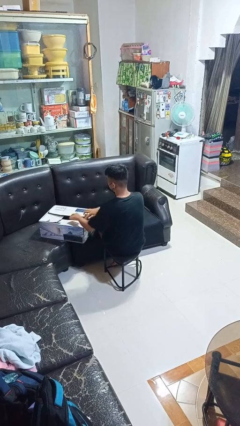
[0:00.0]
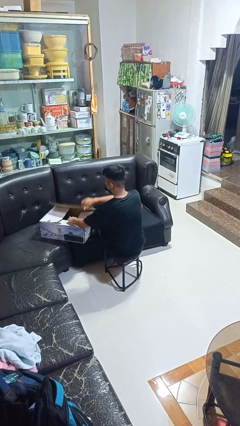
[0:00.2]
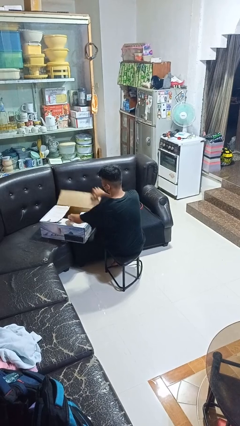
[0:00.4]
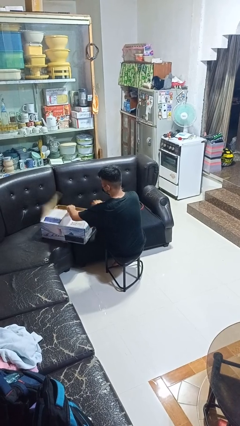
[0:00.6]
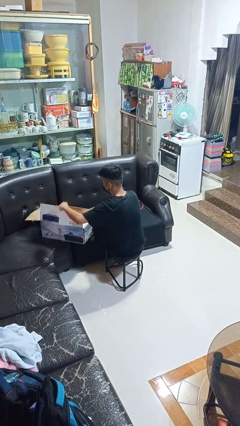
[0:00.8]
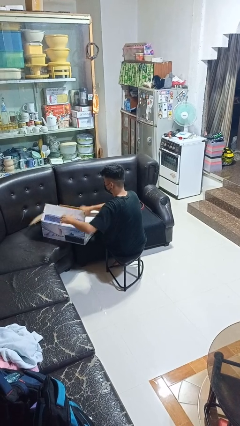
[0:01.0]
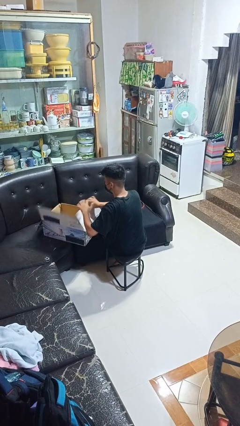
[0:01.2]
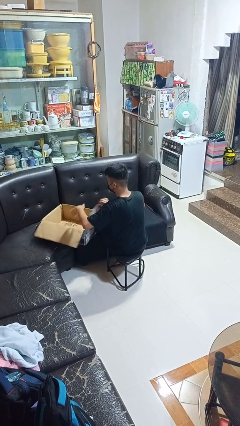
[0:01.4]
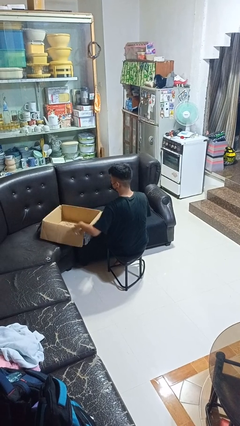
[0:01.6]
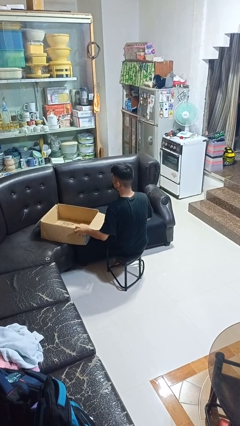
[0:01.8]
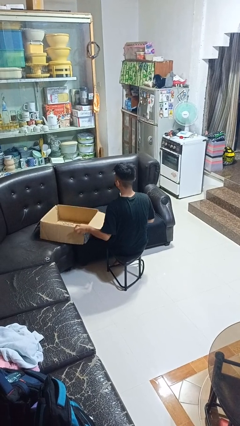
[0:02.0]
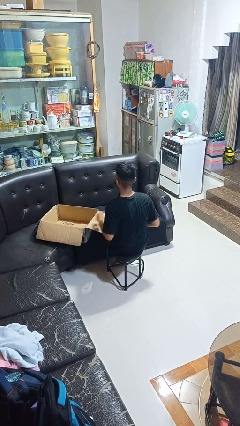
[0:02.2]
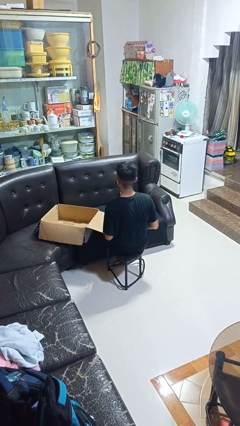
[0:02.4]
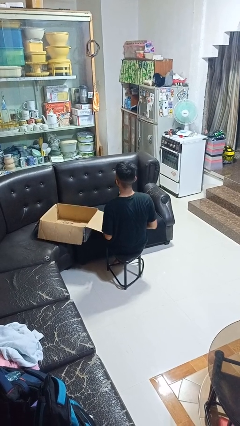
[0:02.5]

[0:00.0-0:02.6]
person opens box

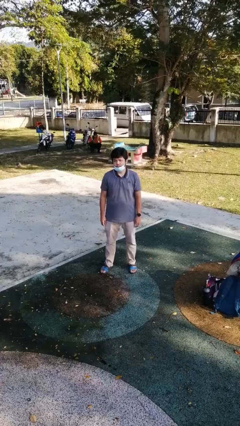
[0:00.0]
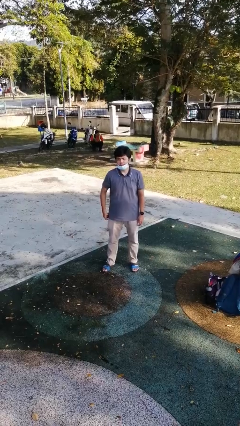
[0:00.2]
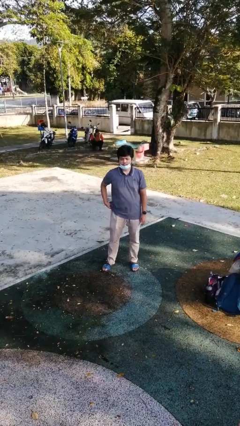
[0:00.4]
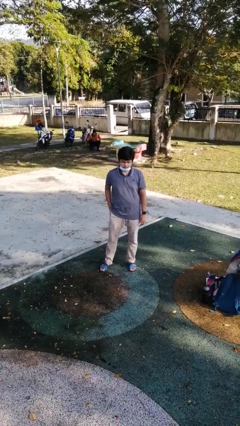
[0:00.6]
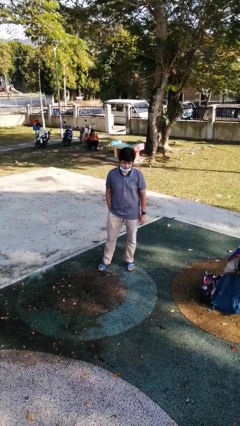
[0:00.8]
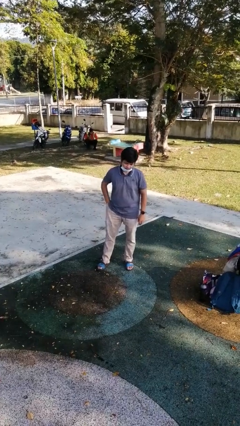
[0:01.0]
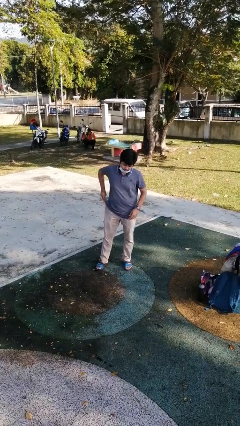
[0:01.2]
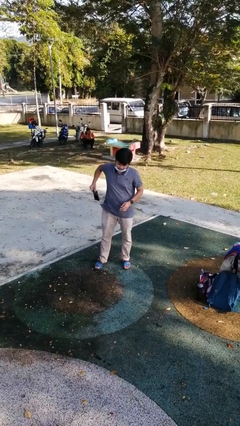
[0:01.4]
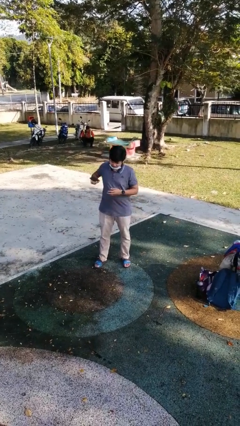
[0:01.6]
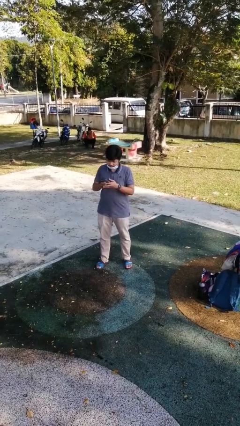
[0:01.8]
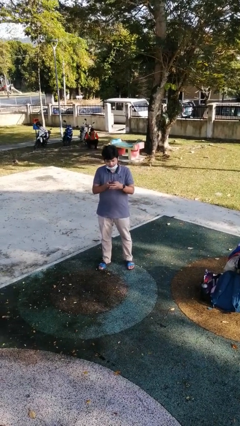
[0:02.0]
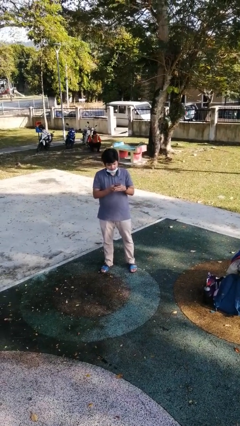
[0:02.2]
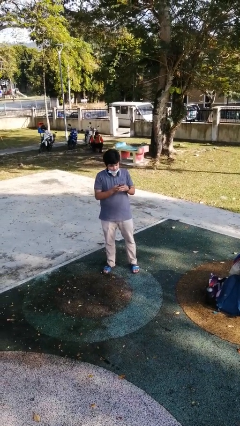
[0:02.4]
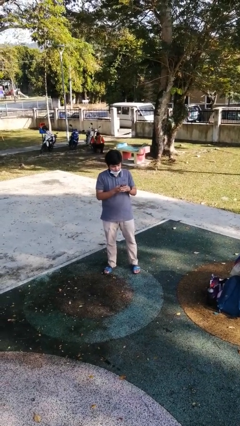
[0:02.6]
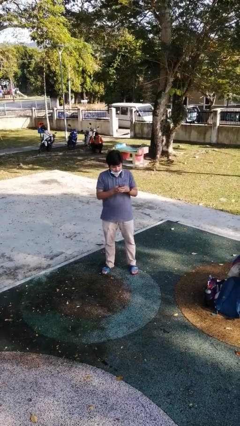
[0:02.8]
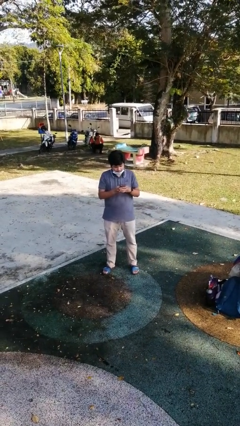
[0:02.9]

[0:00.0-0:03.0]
person takes phone from pocket

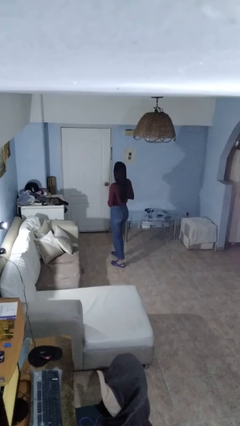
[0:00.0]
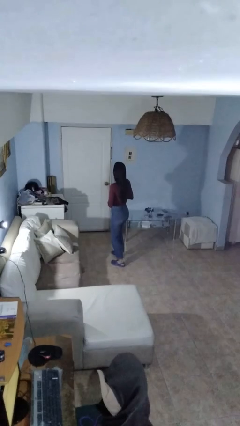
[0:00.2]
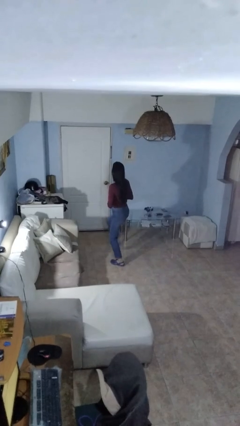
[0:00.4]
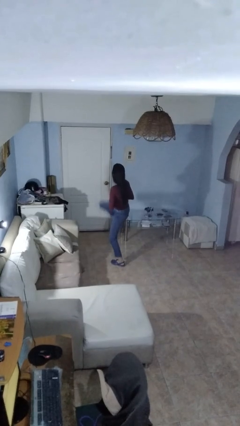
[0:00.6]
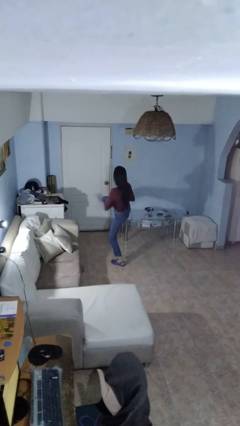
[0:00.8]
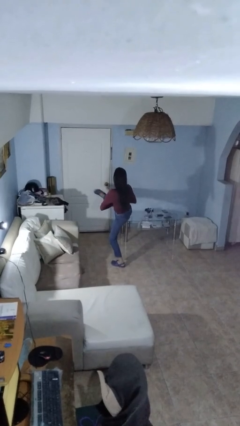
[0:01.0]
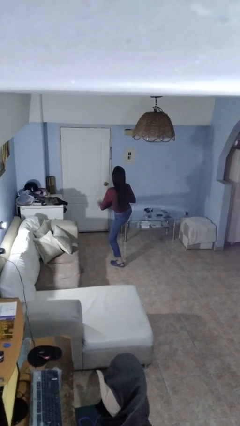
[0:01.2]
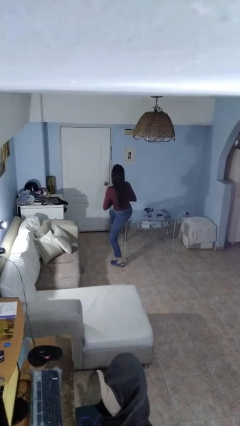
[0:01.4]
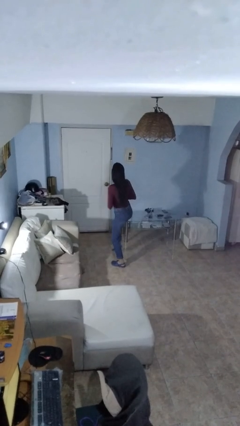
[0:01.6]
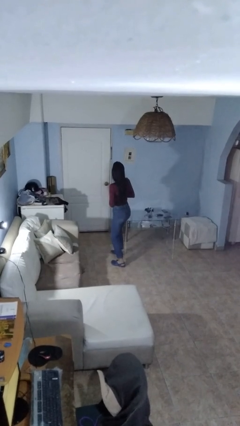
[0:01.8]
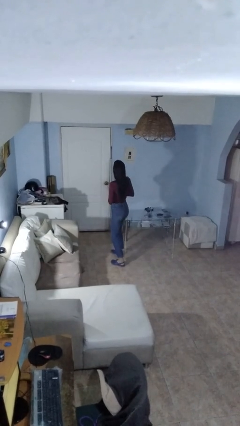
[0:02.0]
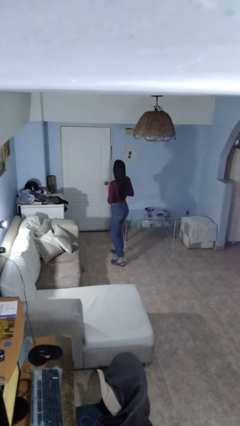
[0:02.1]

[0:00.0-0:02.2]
person karate kicks

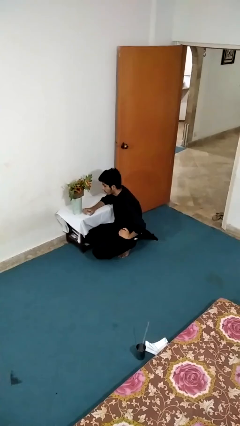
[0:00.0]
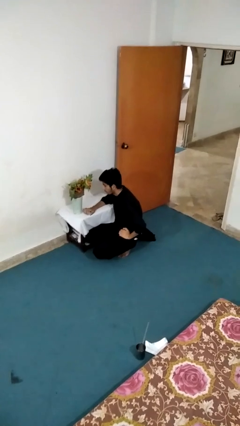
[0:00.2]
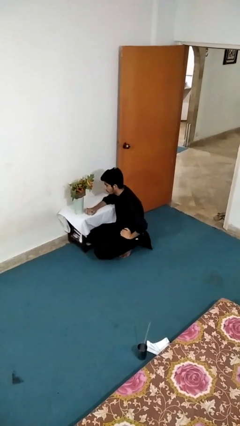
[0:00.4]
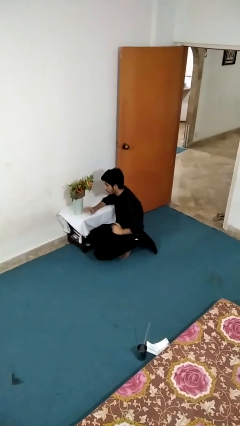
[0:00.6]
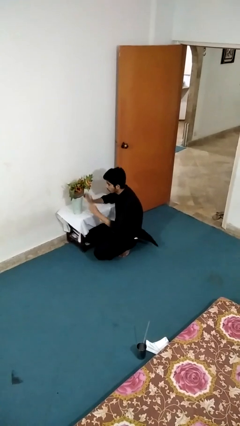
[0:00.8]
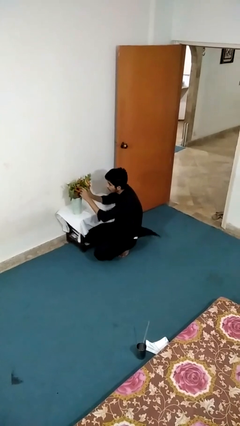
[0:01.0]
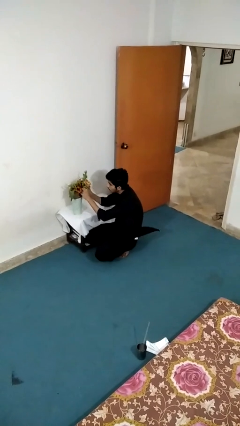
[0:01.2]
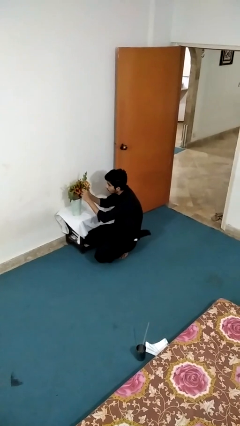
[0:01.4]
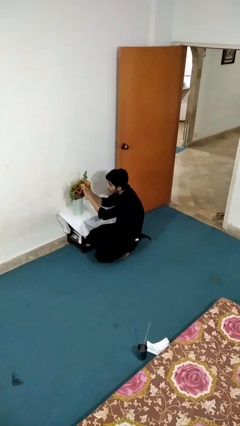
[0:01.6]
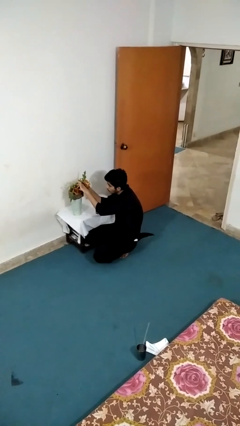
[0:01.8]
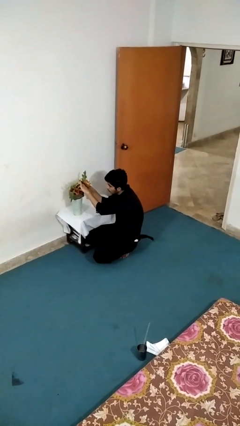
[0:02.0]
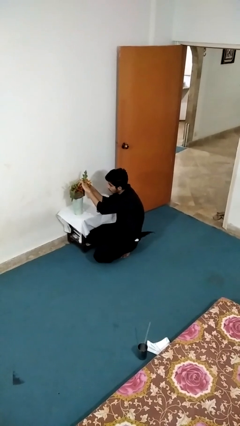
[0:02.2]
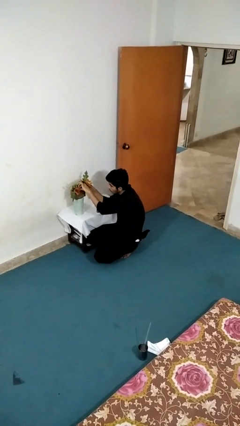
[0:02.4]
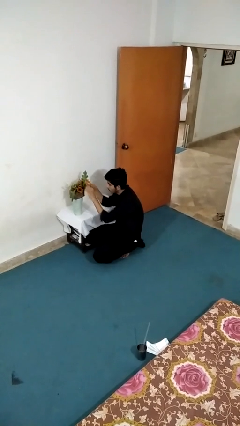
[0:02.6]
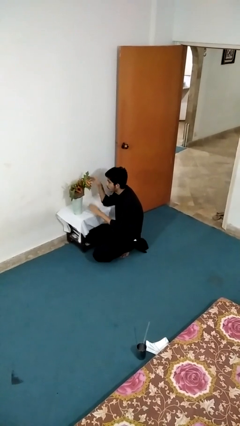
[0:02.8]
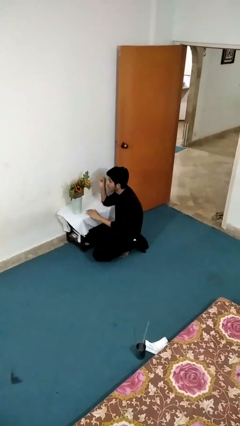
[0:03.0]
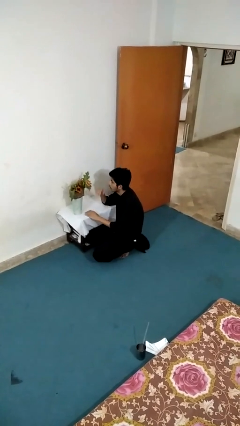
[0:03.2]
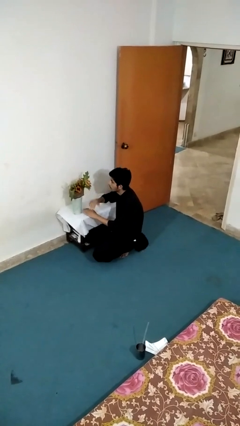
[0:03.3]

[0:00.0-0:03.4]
person arranges flowers in vase

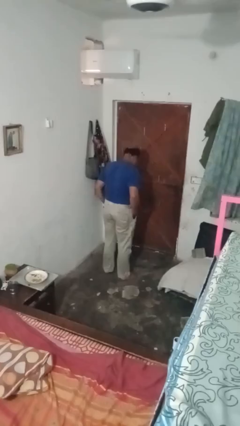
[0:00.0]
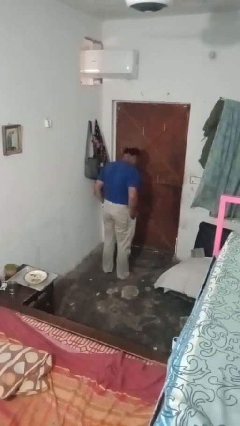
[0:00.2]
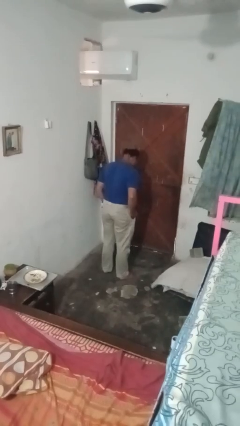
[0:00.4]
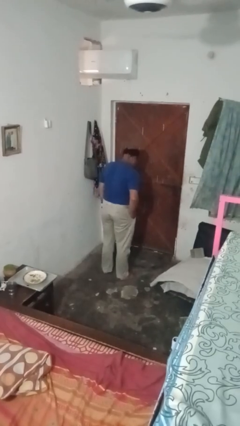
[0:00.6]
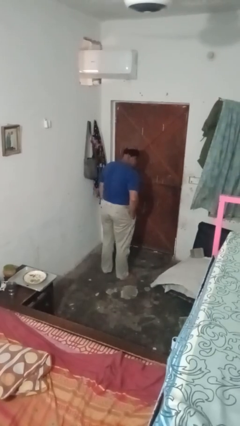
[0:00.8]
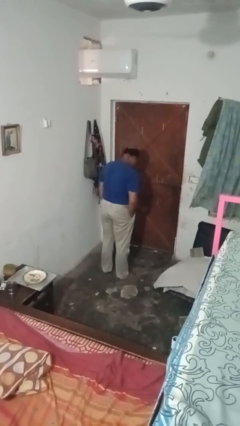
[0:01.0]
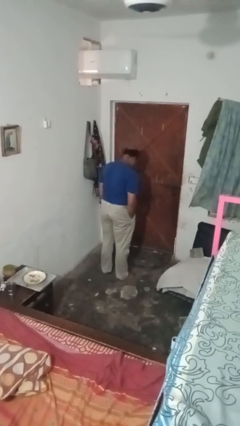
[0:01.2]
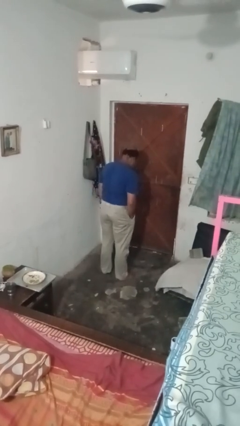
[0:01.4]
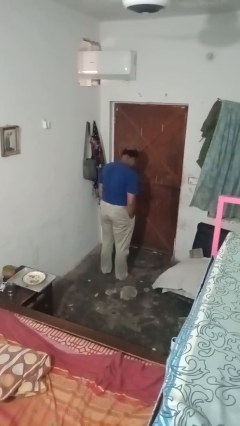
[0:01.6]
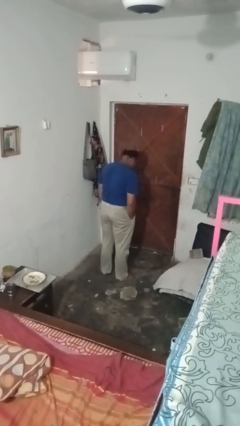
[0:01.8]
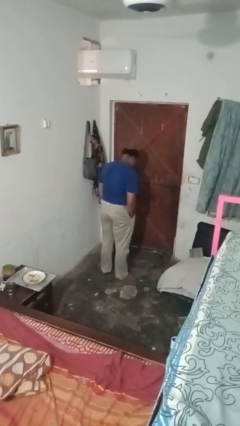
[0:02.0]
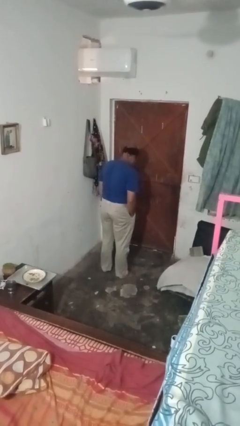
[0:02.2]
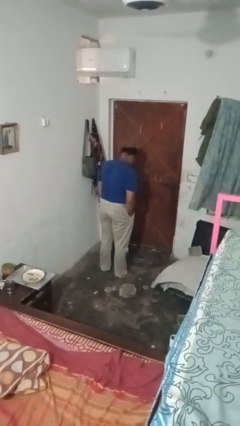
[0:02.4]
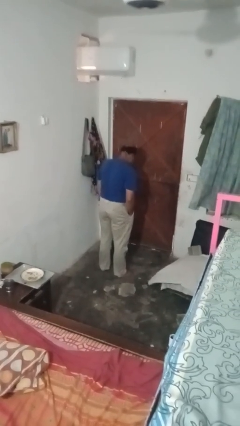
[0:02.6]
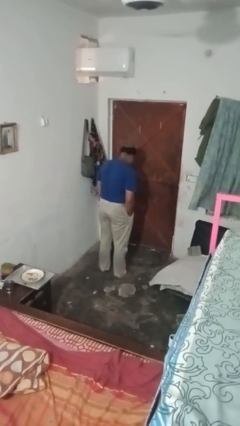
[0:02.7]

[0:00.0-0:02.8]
person puts hands in back pockets

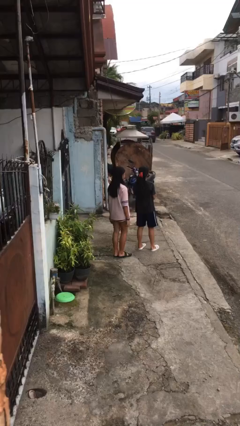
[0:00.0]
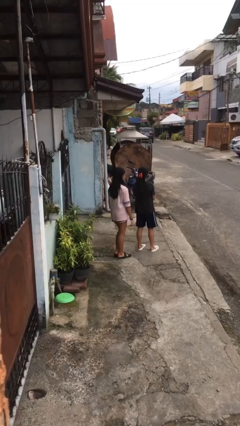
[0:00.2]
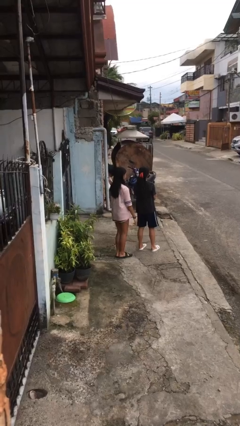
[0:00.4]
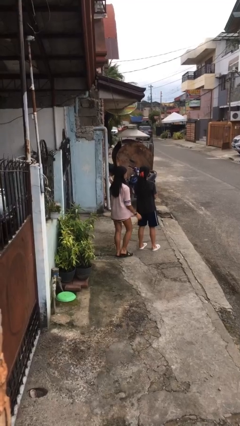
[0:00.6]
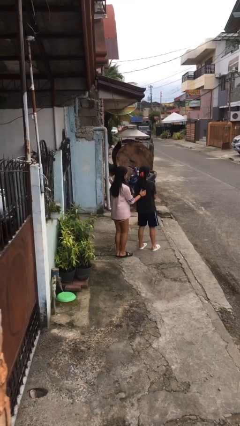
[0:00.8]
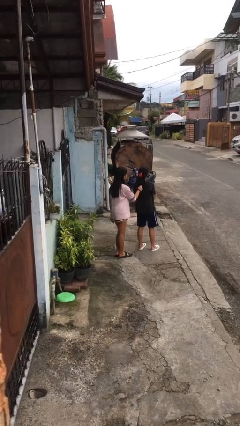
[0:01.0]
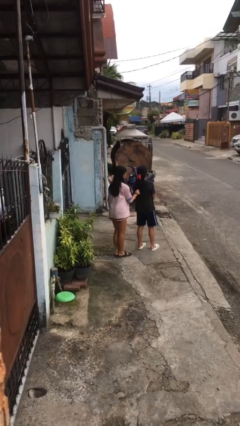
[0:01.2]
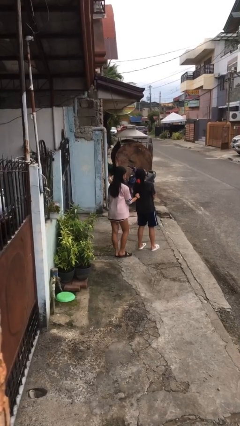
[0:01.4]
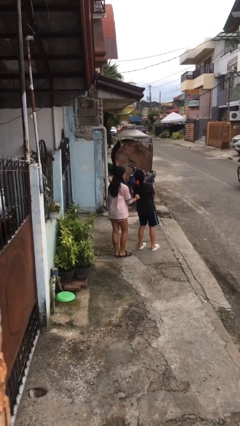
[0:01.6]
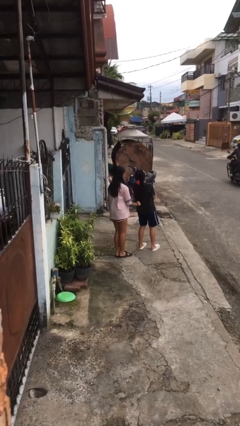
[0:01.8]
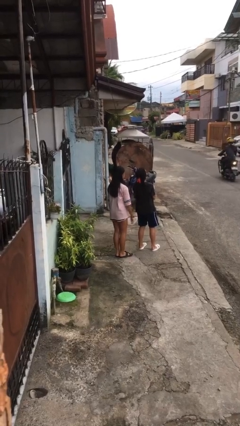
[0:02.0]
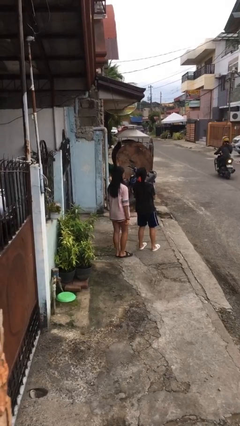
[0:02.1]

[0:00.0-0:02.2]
person grabs person by hair

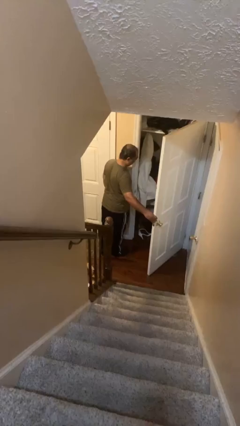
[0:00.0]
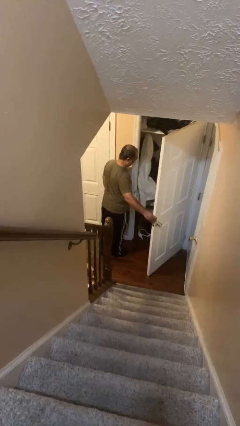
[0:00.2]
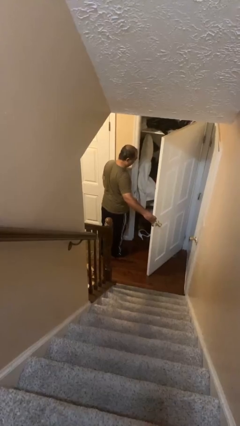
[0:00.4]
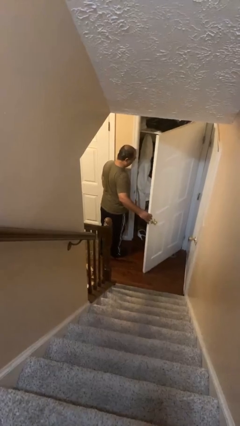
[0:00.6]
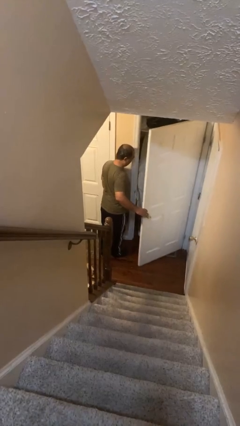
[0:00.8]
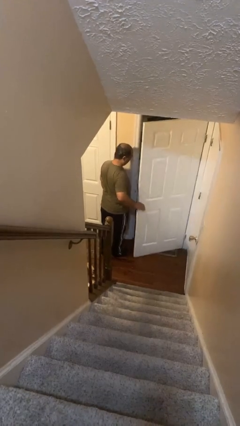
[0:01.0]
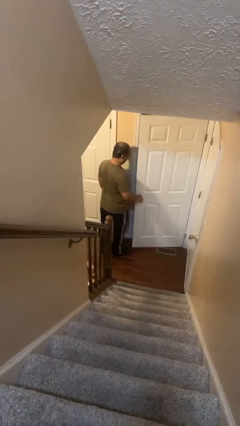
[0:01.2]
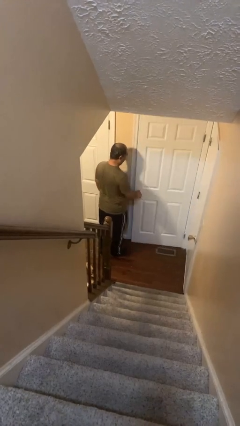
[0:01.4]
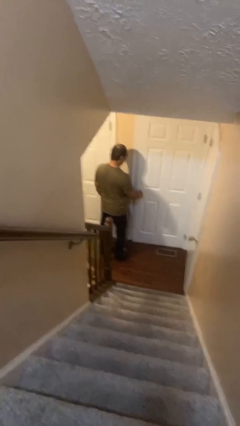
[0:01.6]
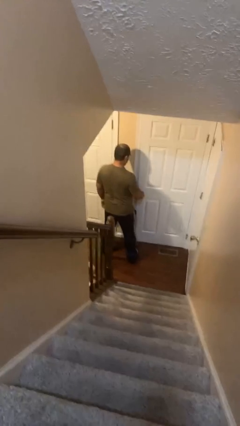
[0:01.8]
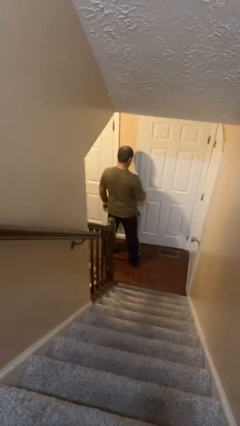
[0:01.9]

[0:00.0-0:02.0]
person closes facility door
